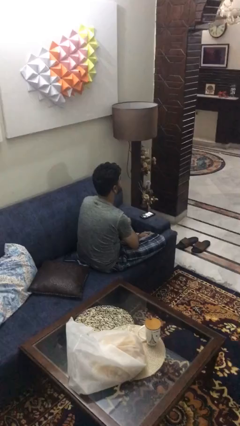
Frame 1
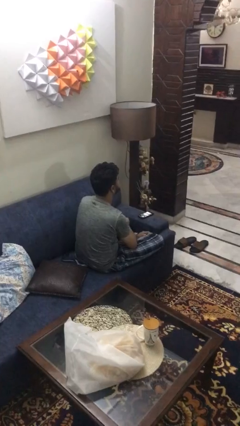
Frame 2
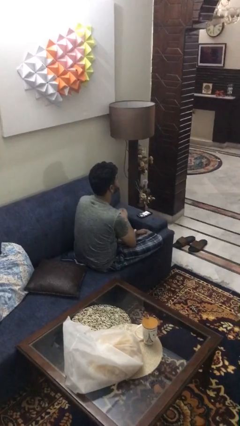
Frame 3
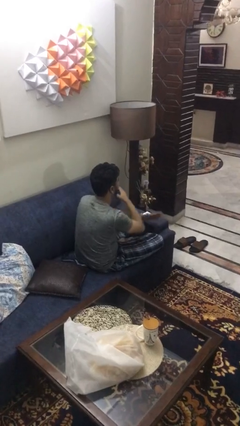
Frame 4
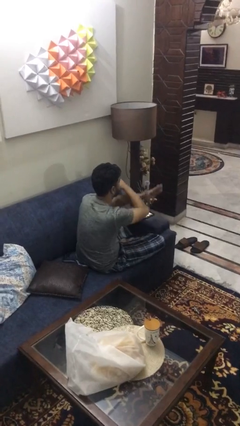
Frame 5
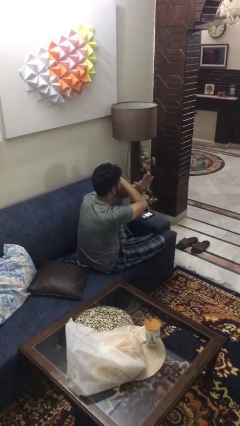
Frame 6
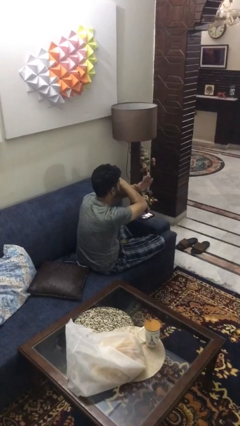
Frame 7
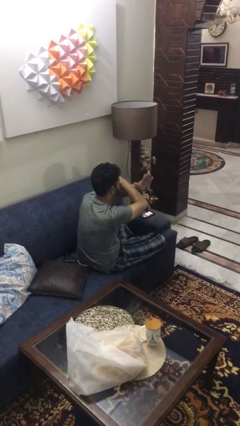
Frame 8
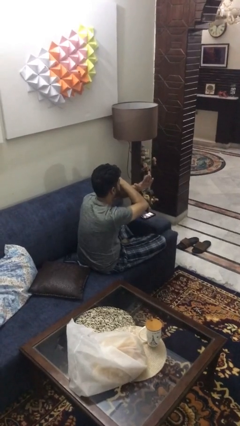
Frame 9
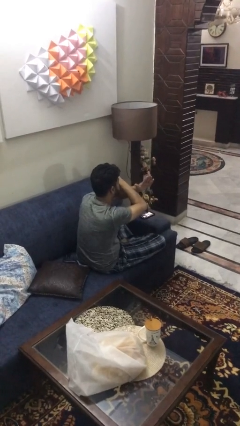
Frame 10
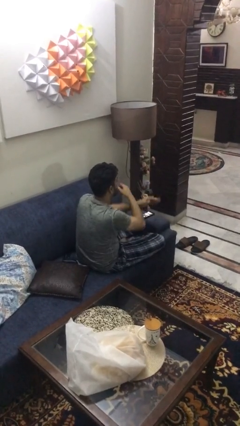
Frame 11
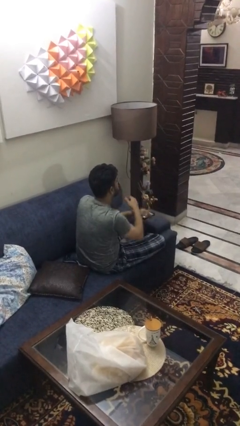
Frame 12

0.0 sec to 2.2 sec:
person gestures arms x

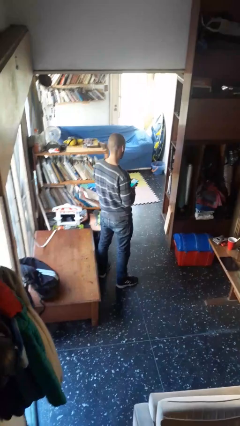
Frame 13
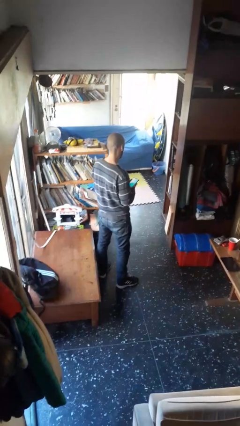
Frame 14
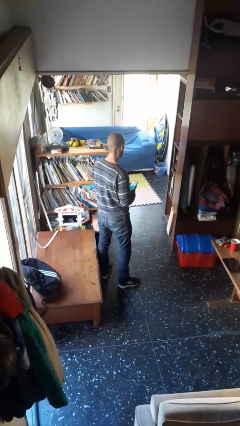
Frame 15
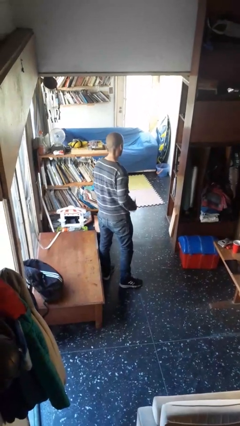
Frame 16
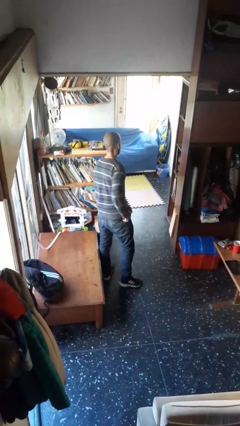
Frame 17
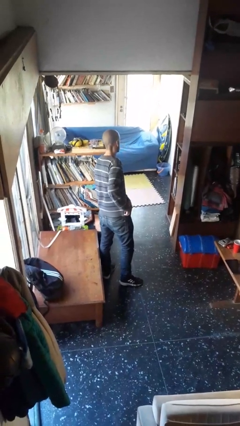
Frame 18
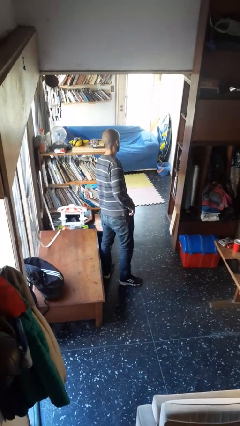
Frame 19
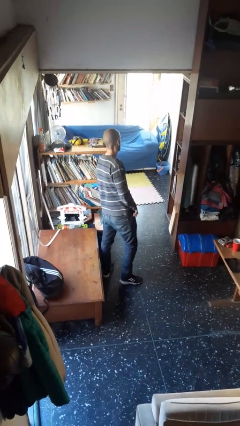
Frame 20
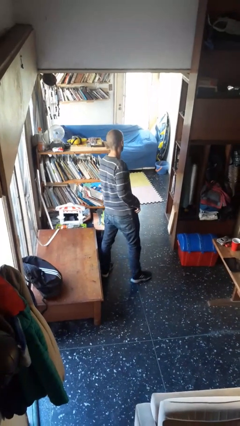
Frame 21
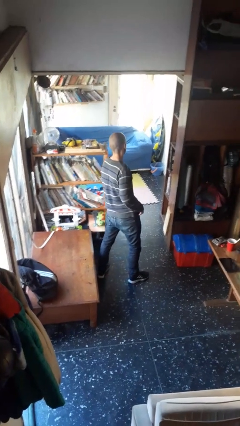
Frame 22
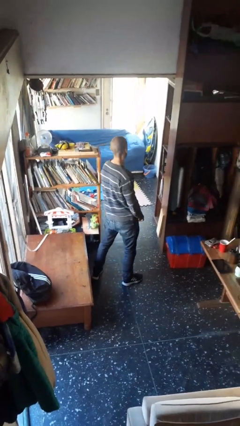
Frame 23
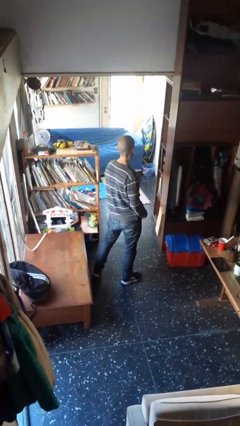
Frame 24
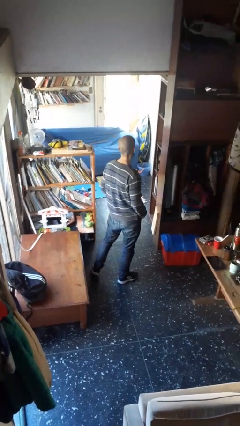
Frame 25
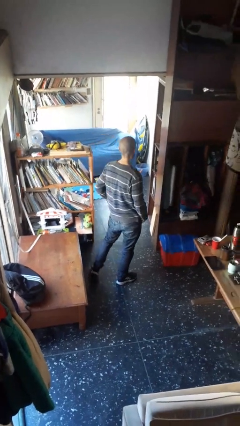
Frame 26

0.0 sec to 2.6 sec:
person puts phone into pocket

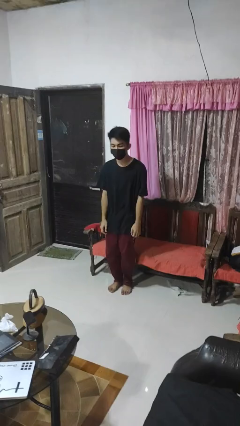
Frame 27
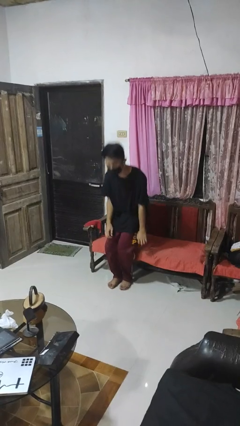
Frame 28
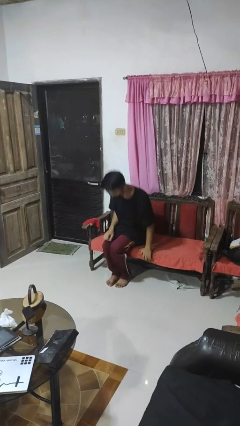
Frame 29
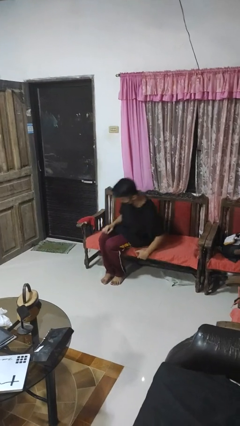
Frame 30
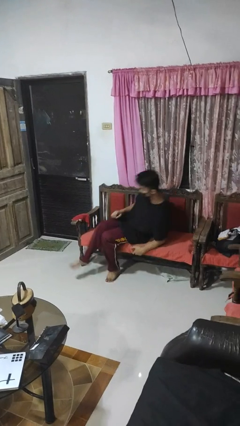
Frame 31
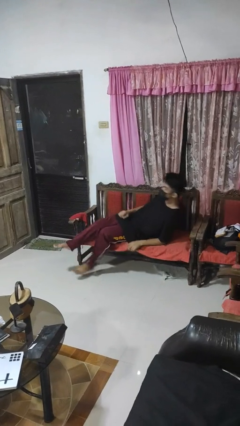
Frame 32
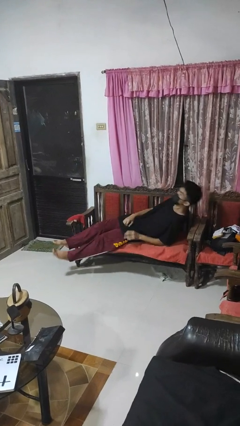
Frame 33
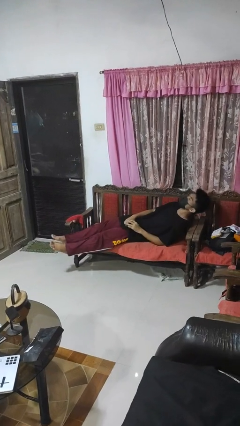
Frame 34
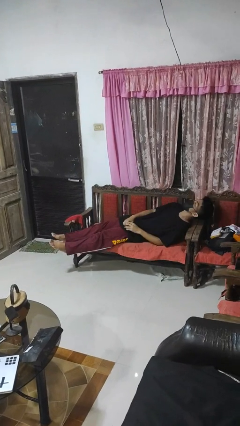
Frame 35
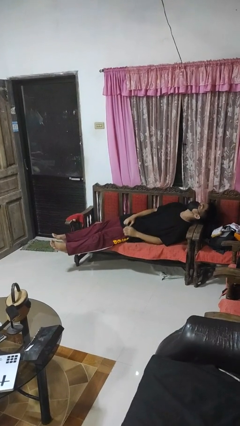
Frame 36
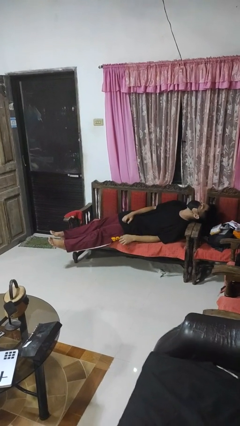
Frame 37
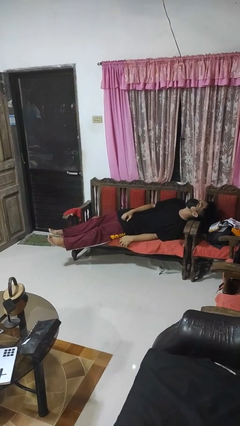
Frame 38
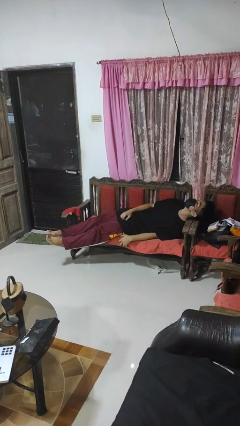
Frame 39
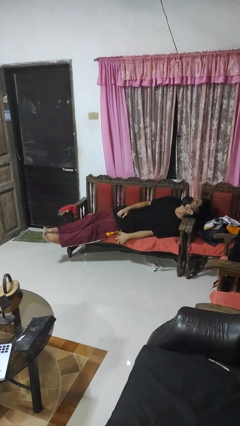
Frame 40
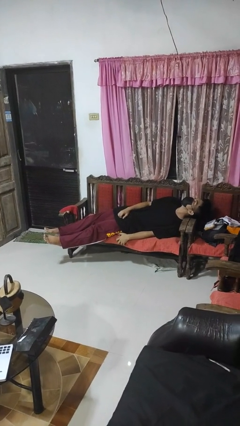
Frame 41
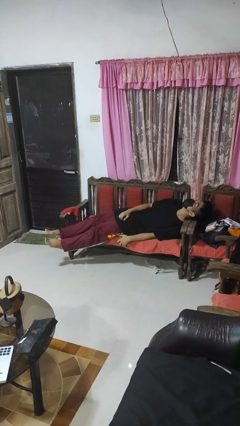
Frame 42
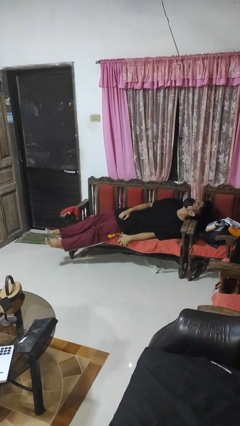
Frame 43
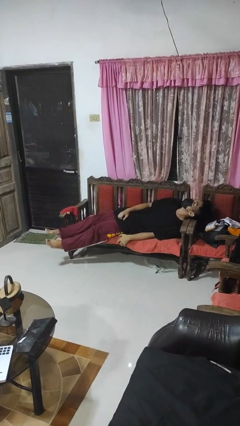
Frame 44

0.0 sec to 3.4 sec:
person lies down on couch

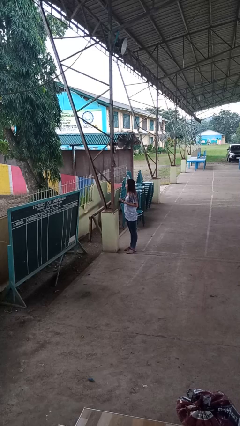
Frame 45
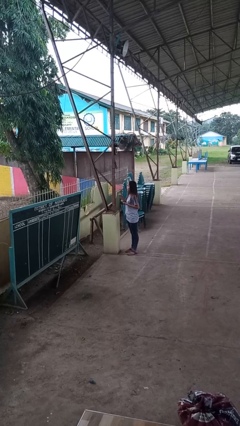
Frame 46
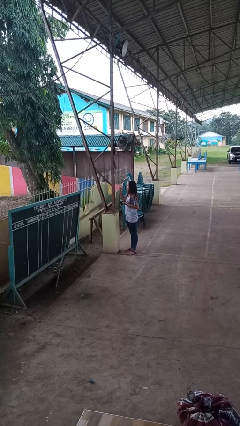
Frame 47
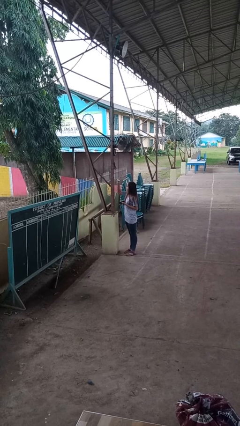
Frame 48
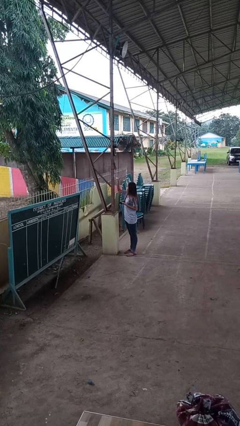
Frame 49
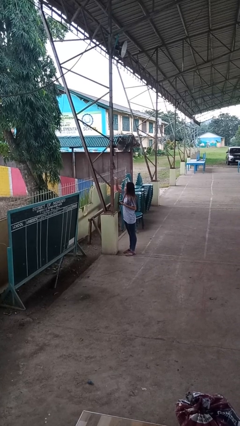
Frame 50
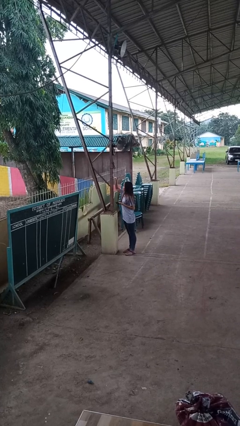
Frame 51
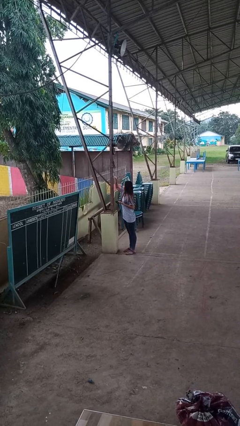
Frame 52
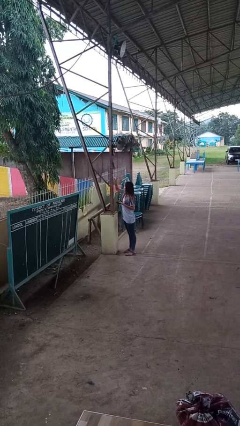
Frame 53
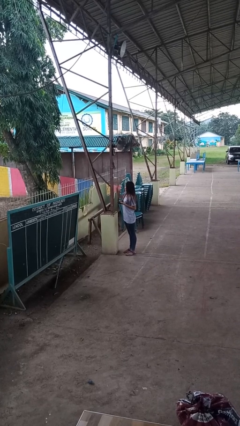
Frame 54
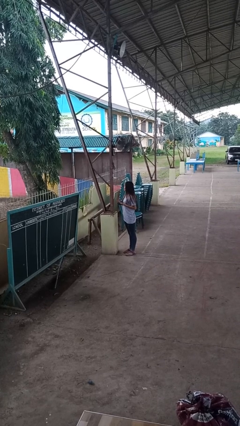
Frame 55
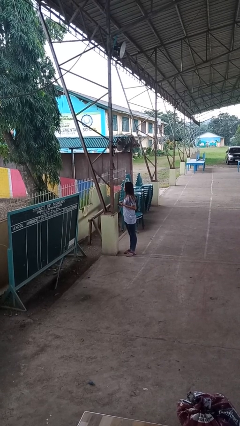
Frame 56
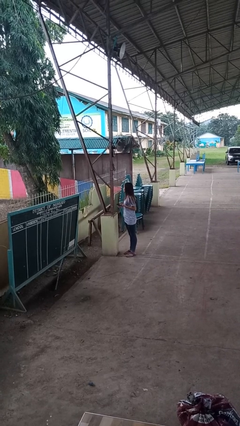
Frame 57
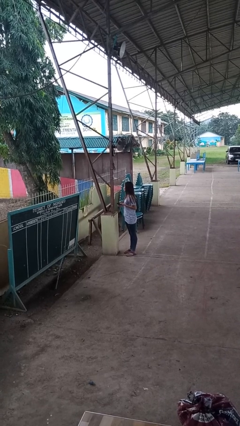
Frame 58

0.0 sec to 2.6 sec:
person plugs into electrical socket

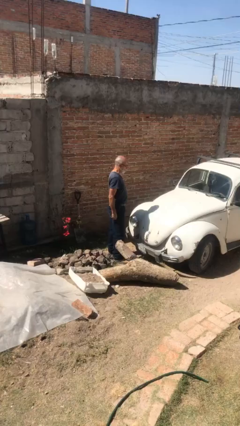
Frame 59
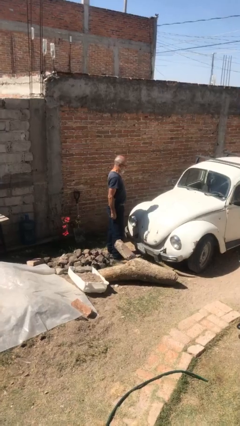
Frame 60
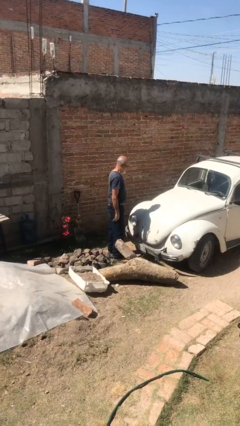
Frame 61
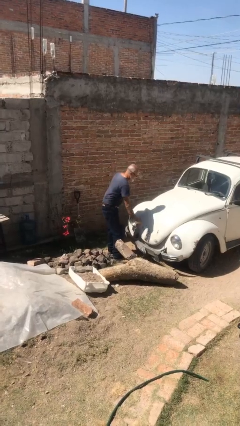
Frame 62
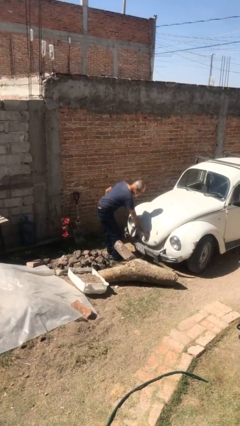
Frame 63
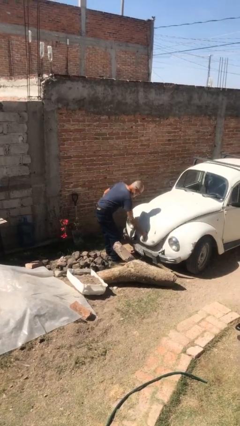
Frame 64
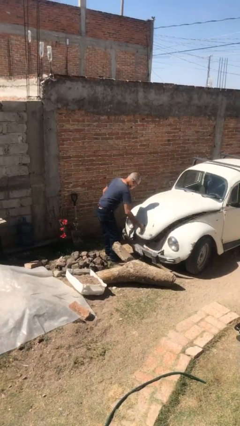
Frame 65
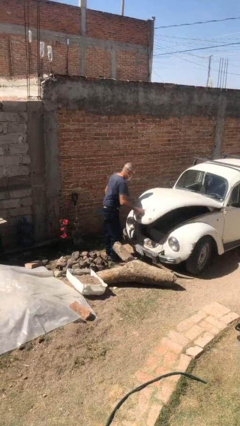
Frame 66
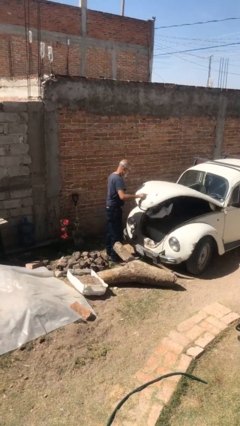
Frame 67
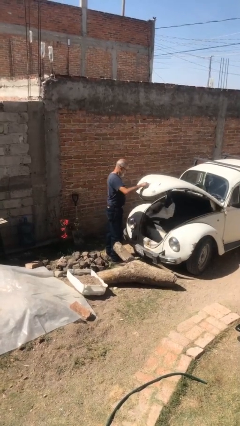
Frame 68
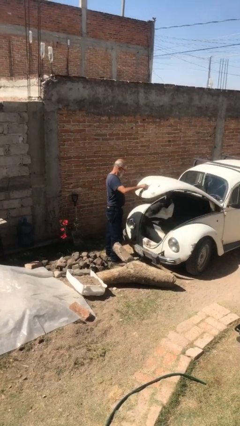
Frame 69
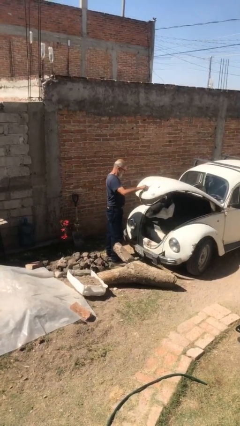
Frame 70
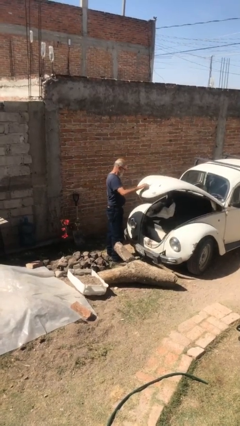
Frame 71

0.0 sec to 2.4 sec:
person opens car trunk

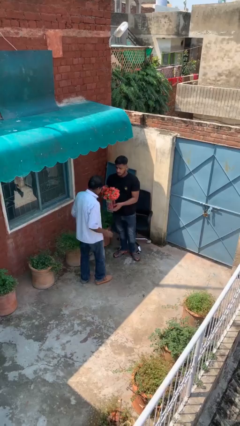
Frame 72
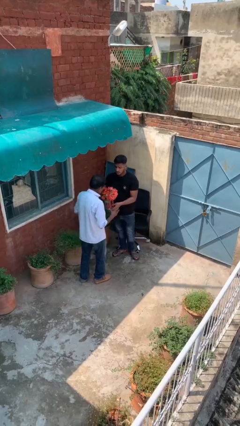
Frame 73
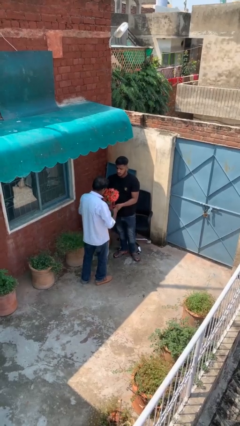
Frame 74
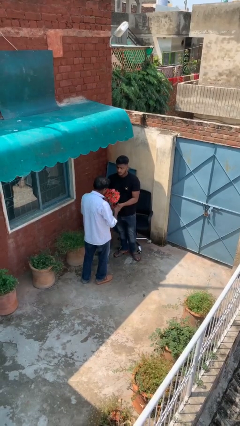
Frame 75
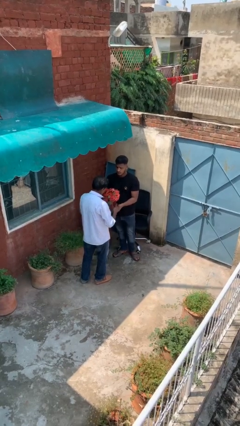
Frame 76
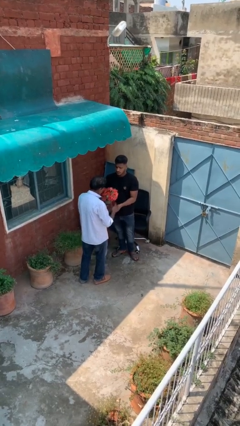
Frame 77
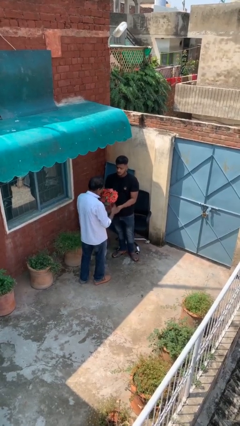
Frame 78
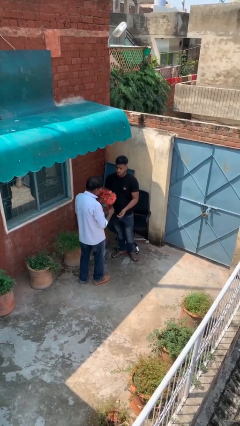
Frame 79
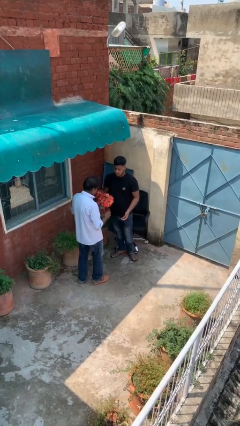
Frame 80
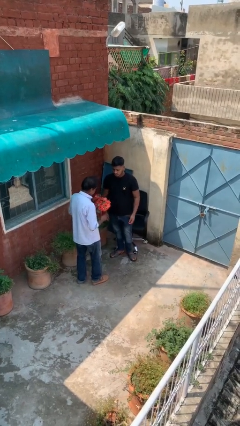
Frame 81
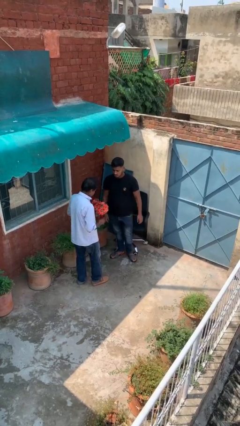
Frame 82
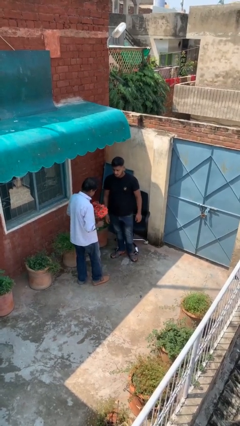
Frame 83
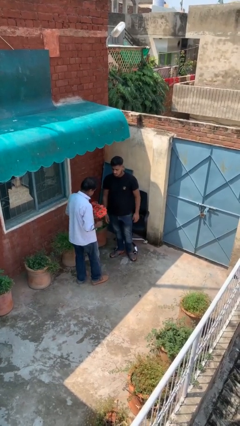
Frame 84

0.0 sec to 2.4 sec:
person transfers object to person

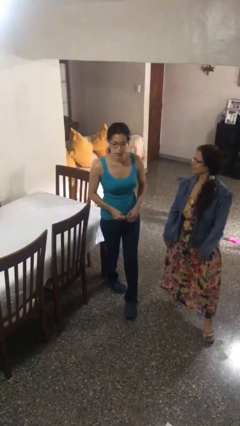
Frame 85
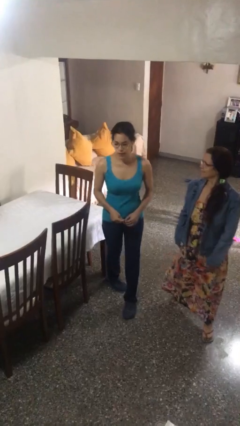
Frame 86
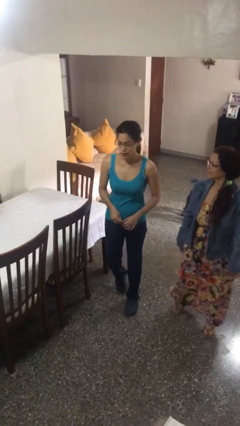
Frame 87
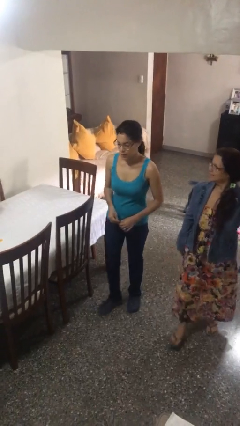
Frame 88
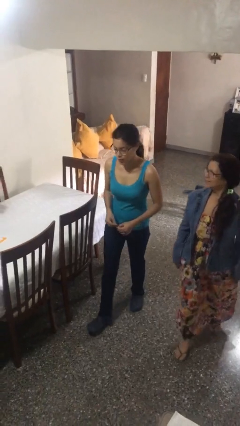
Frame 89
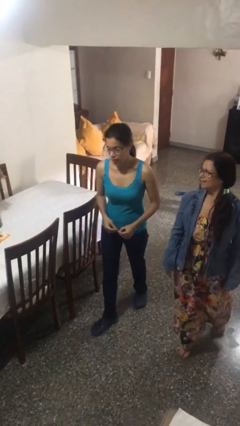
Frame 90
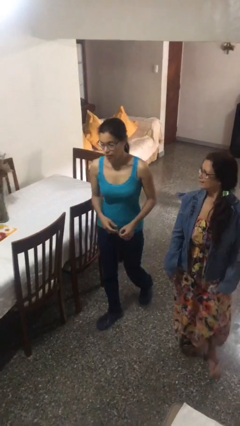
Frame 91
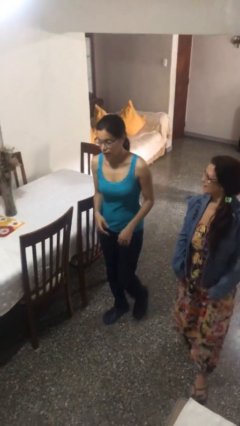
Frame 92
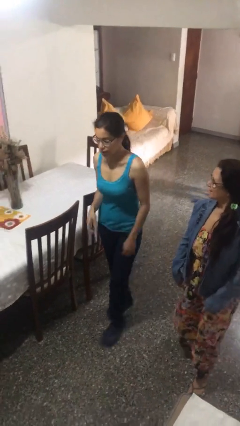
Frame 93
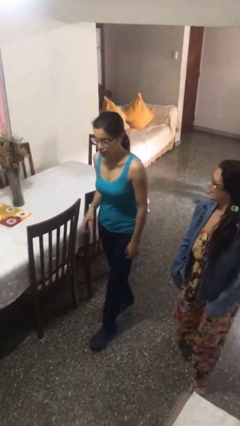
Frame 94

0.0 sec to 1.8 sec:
person talks to person
